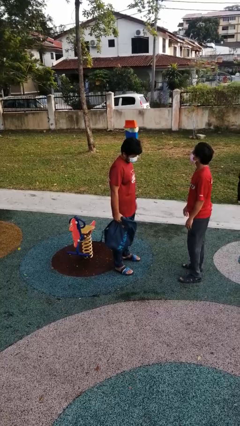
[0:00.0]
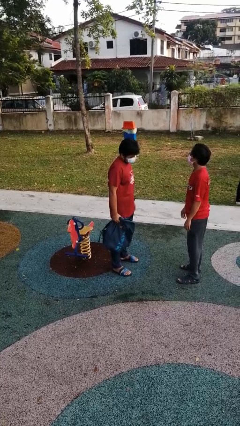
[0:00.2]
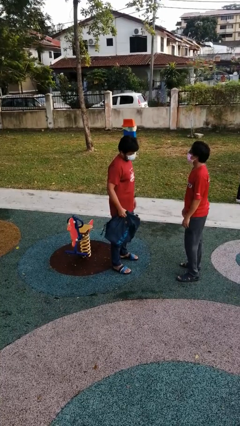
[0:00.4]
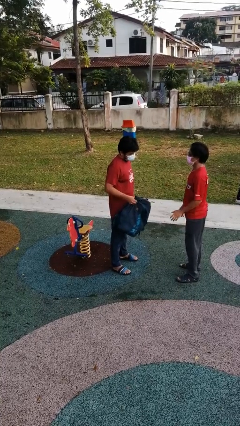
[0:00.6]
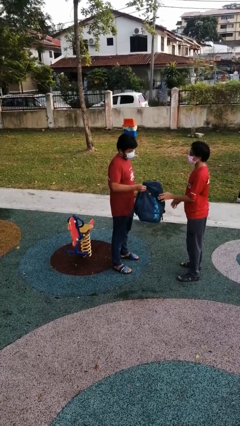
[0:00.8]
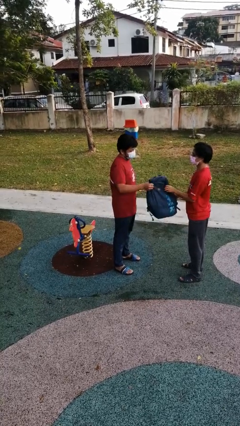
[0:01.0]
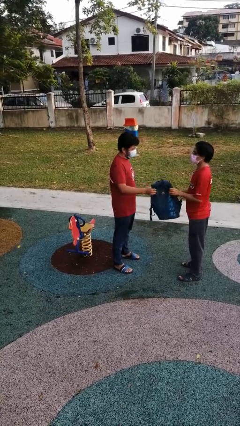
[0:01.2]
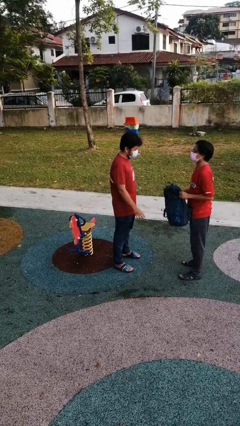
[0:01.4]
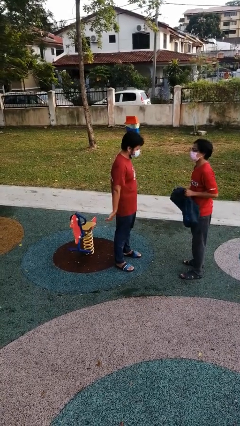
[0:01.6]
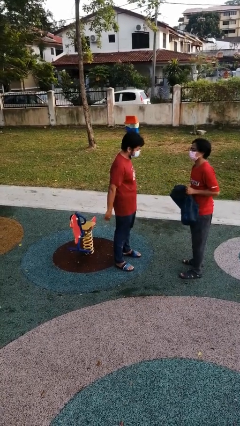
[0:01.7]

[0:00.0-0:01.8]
person transfers object to person

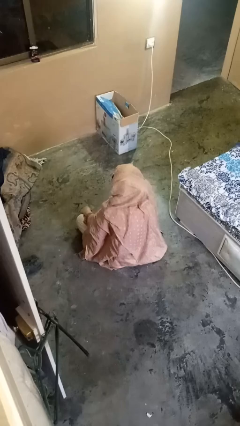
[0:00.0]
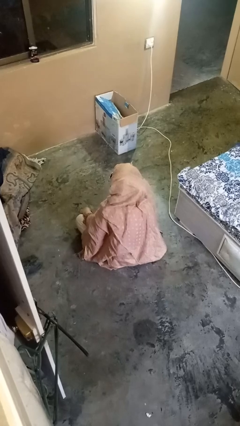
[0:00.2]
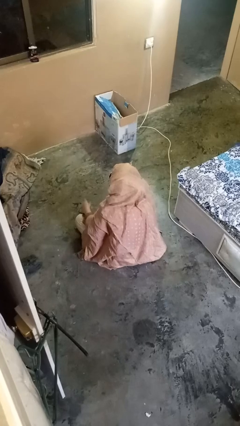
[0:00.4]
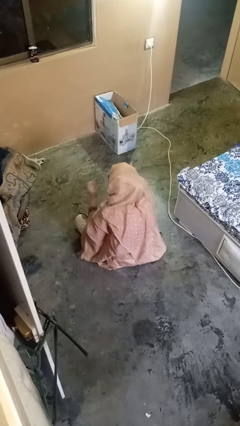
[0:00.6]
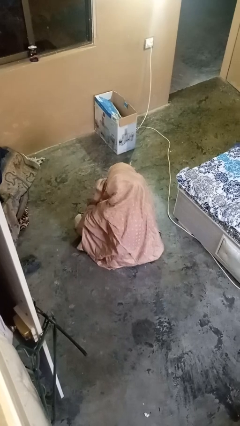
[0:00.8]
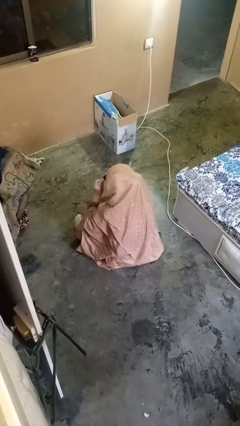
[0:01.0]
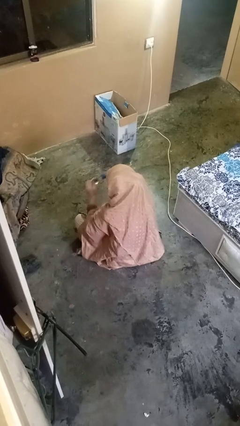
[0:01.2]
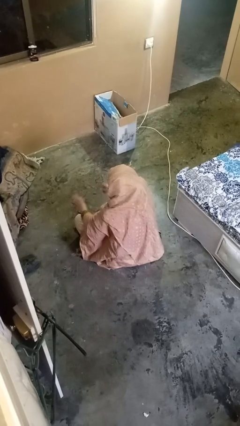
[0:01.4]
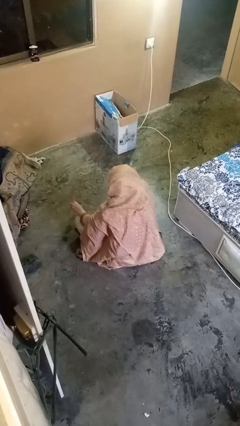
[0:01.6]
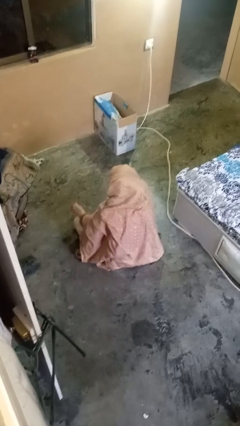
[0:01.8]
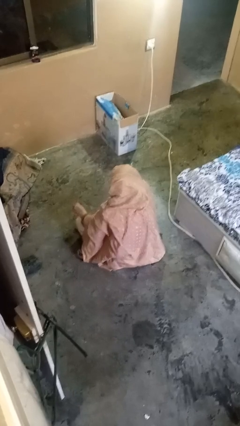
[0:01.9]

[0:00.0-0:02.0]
person takes off glasses

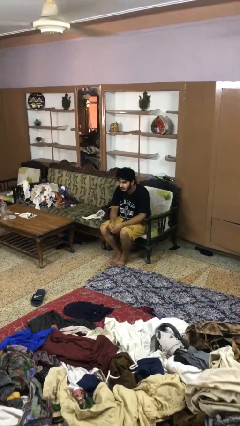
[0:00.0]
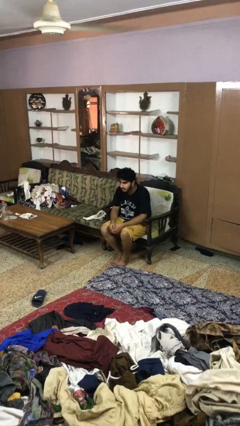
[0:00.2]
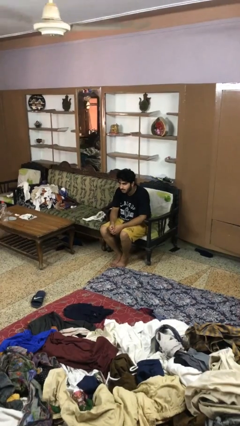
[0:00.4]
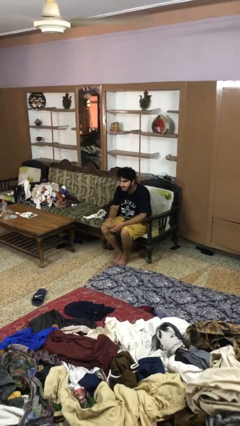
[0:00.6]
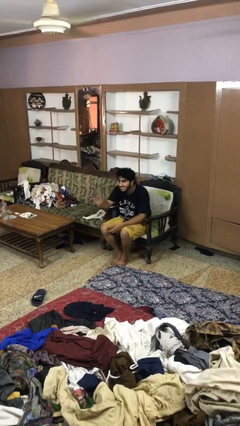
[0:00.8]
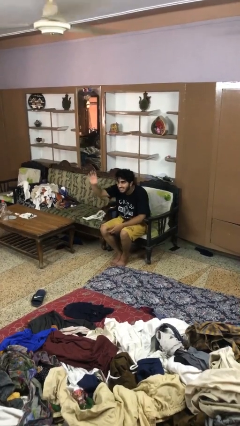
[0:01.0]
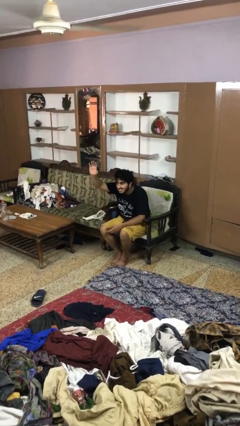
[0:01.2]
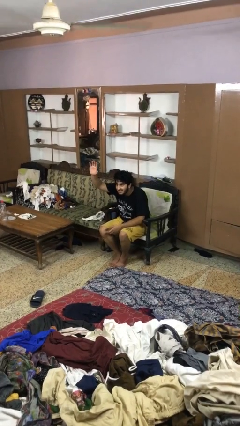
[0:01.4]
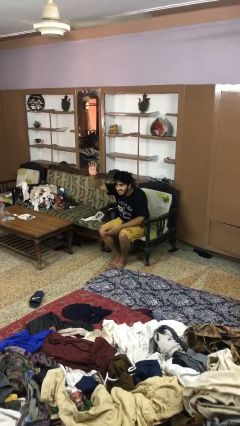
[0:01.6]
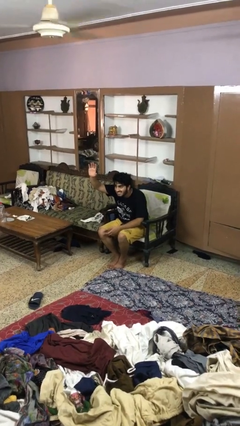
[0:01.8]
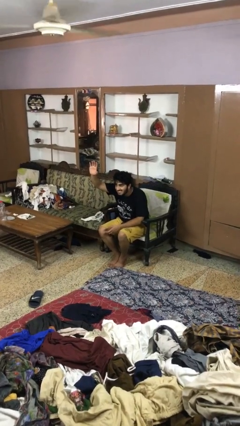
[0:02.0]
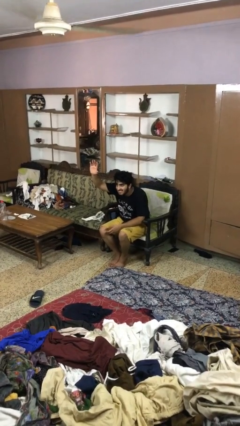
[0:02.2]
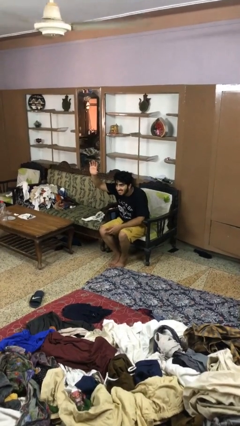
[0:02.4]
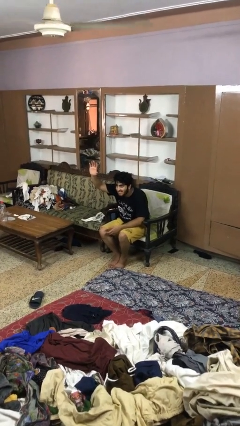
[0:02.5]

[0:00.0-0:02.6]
person gestures raise hand

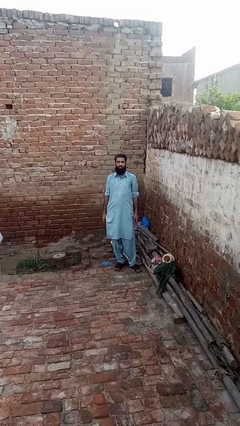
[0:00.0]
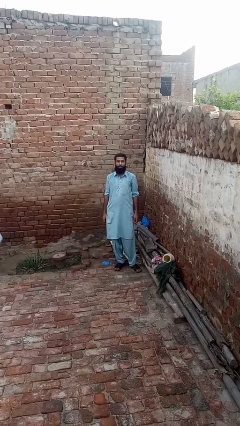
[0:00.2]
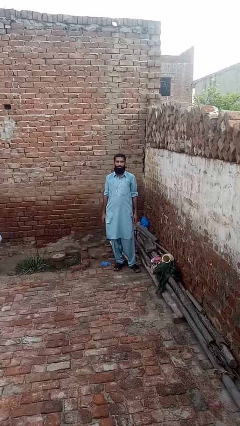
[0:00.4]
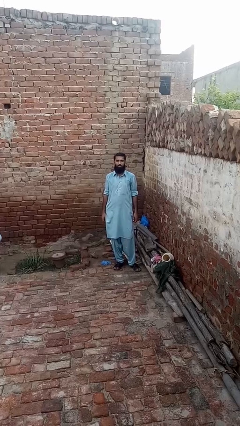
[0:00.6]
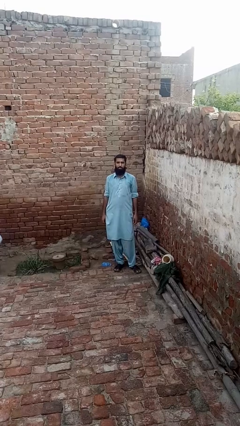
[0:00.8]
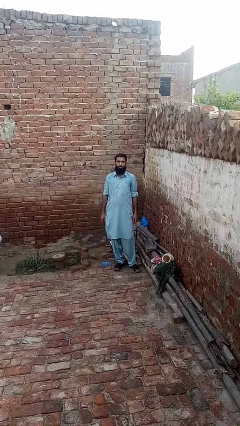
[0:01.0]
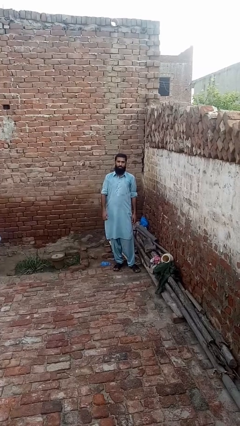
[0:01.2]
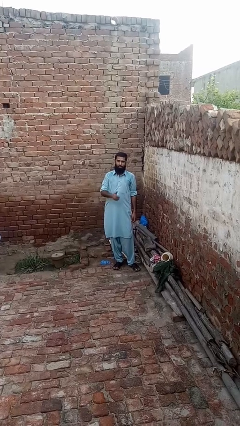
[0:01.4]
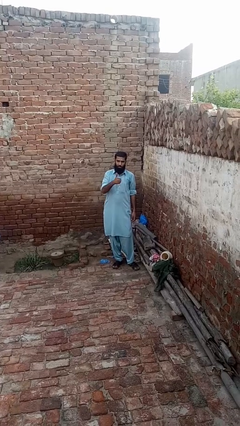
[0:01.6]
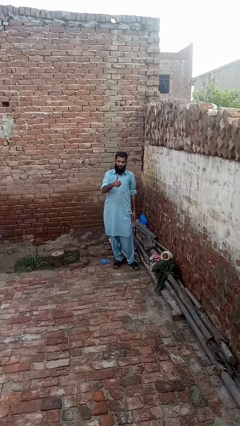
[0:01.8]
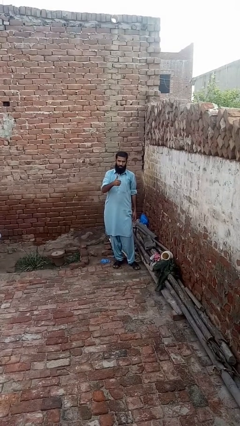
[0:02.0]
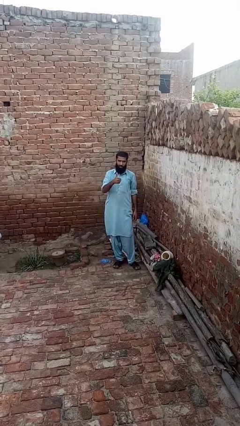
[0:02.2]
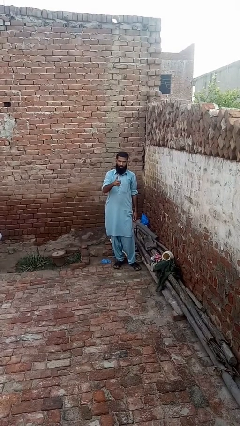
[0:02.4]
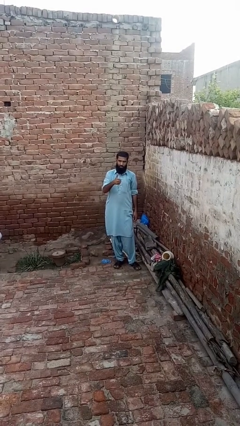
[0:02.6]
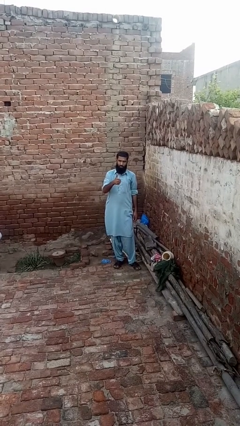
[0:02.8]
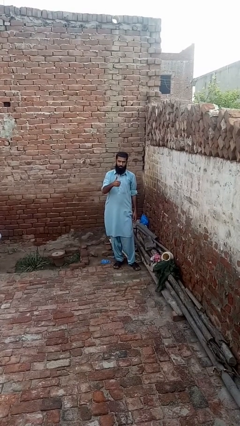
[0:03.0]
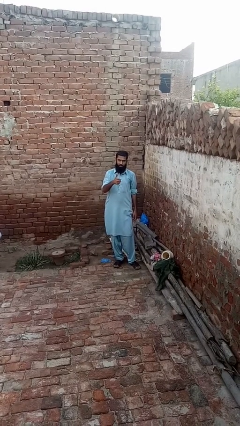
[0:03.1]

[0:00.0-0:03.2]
person gestures thumbs up

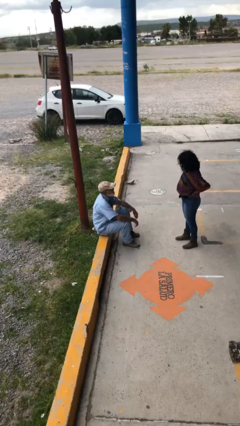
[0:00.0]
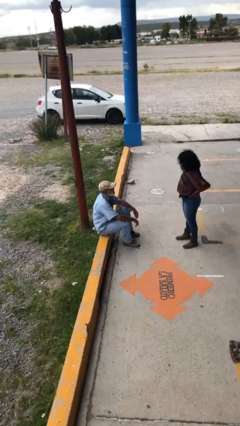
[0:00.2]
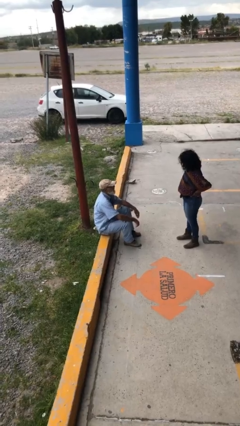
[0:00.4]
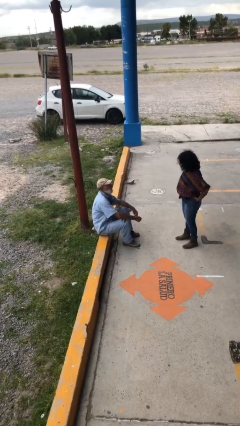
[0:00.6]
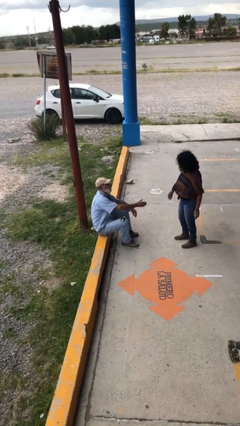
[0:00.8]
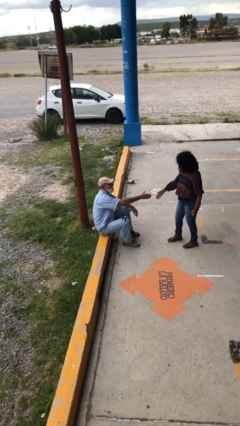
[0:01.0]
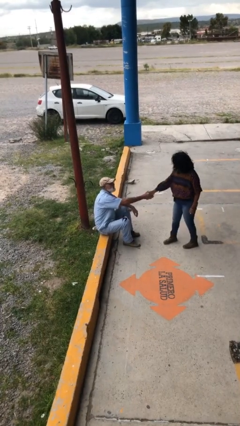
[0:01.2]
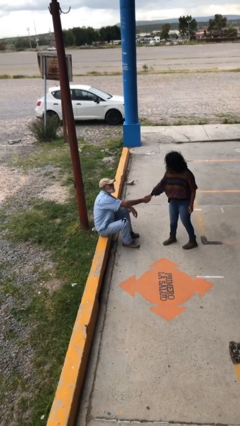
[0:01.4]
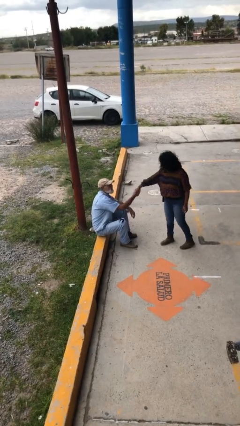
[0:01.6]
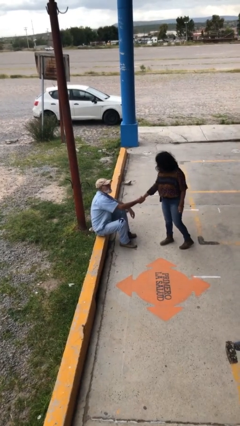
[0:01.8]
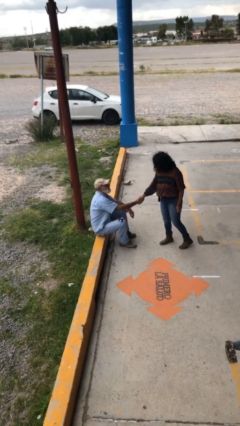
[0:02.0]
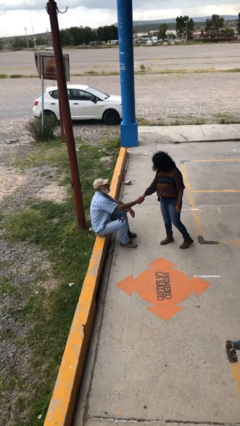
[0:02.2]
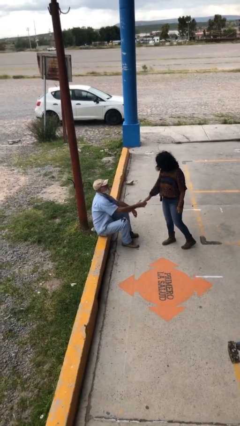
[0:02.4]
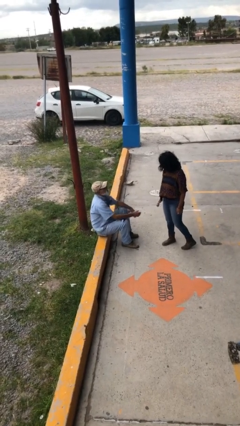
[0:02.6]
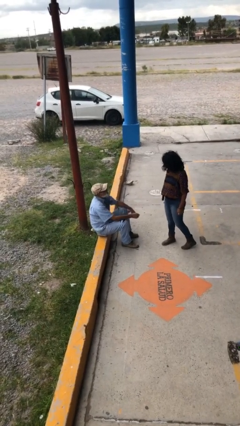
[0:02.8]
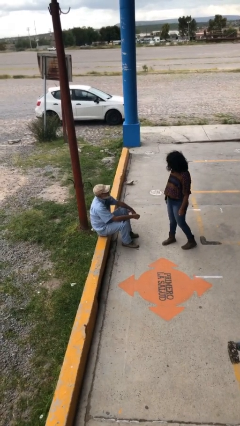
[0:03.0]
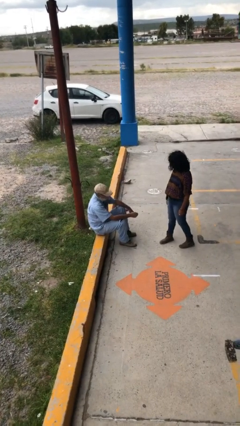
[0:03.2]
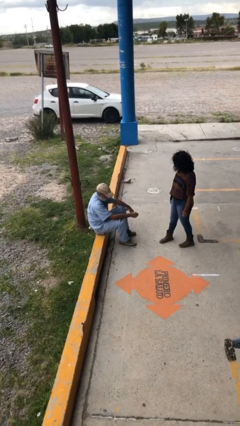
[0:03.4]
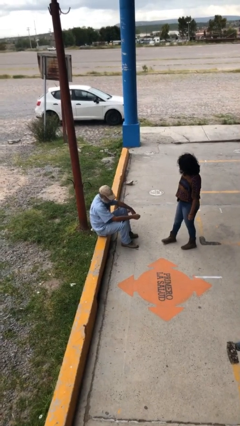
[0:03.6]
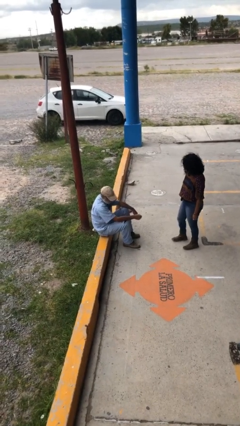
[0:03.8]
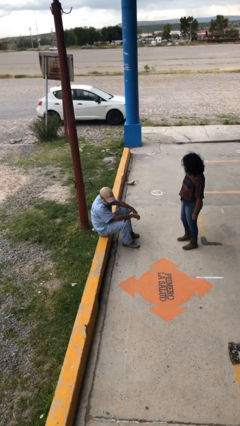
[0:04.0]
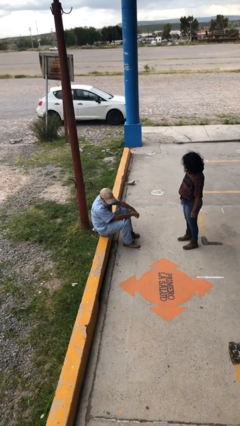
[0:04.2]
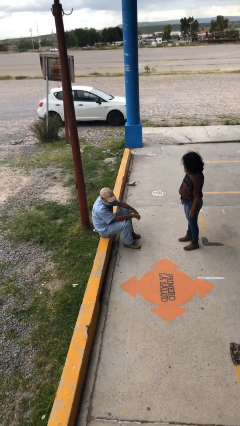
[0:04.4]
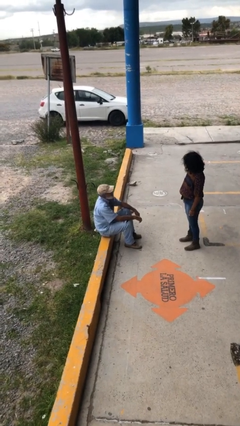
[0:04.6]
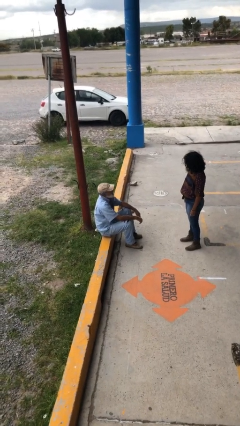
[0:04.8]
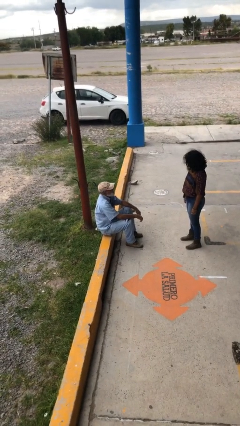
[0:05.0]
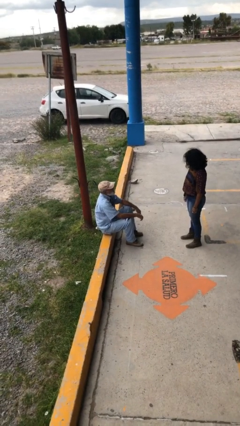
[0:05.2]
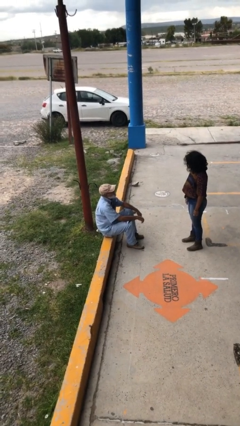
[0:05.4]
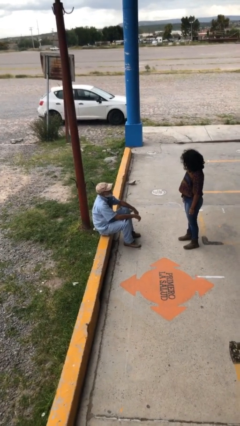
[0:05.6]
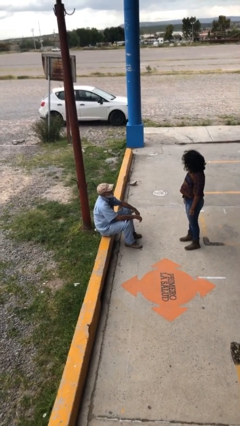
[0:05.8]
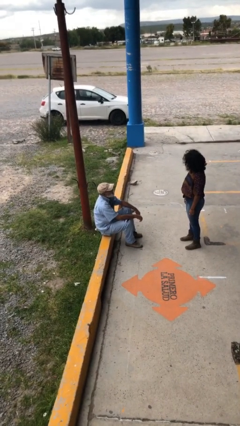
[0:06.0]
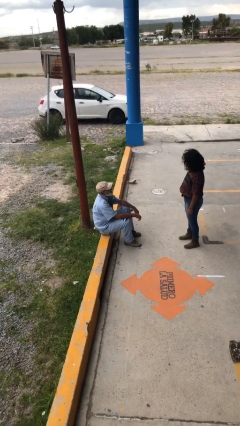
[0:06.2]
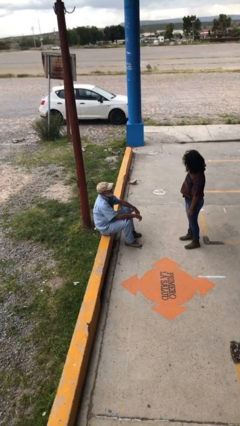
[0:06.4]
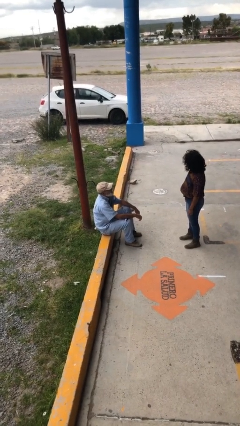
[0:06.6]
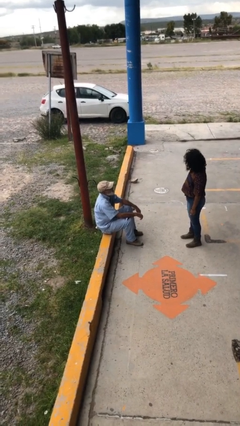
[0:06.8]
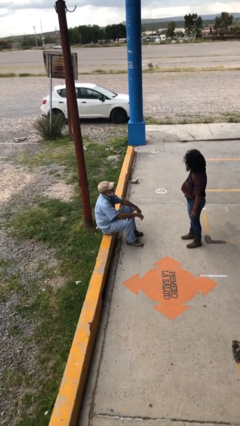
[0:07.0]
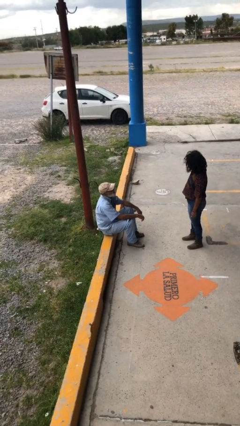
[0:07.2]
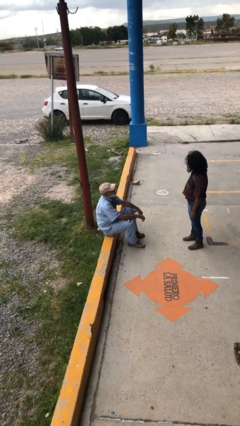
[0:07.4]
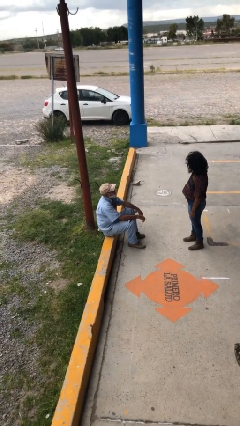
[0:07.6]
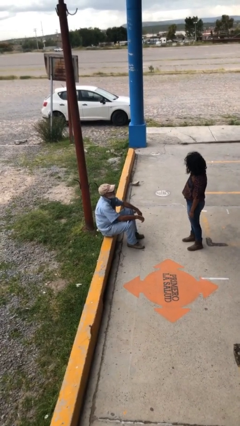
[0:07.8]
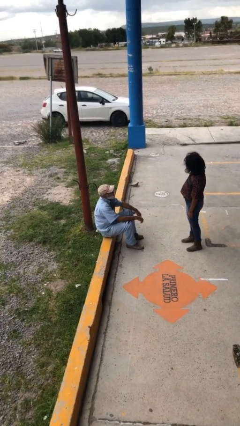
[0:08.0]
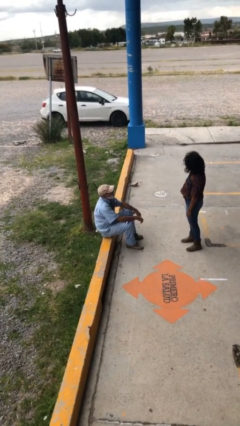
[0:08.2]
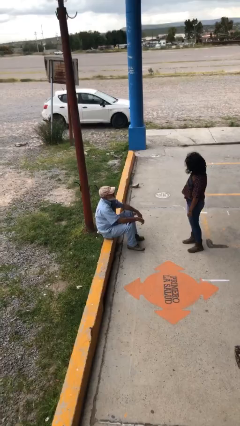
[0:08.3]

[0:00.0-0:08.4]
person shakes hand
